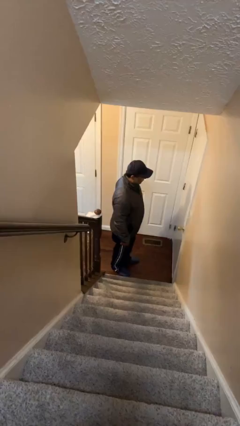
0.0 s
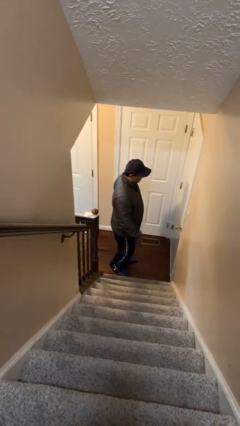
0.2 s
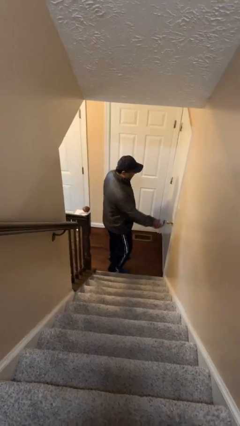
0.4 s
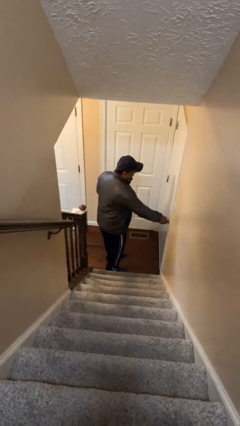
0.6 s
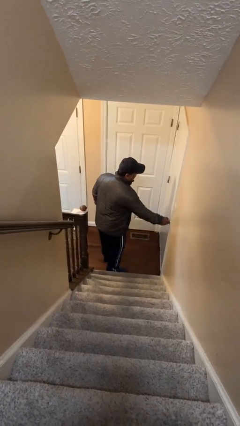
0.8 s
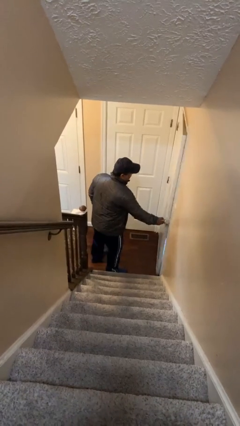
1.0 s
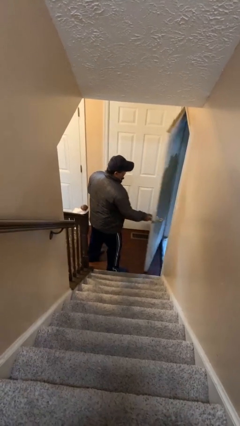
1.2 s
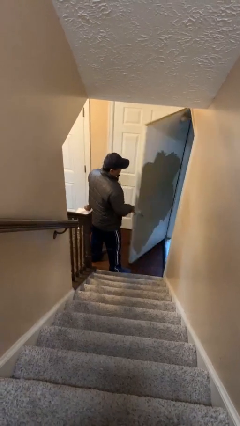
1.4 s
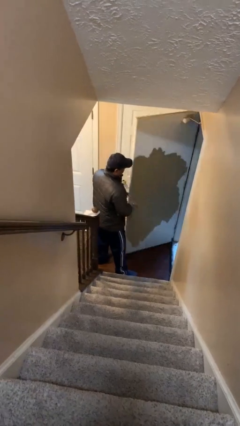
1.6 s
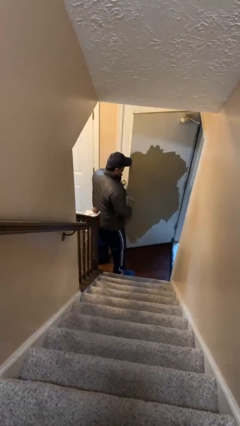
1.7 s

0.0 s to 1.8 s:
person opens facility door

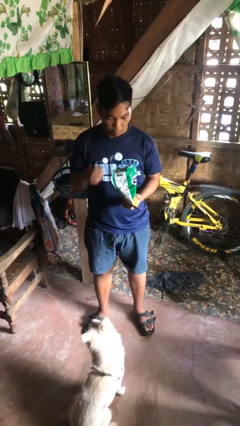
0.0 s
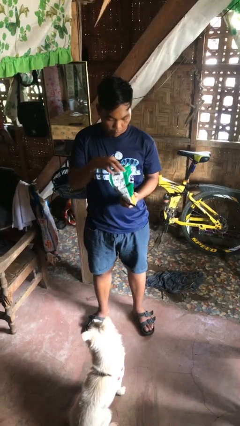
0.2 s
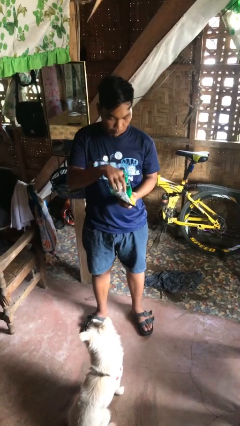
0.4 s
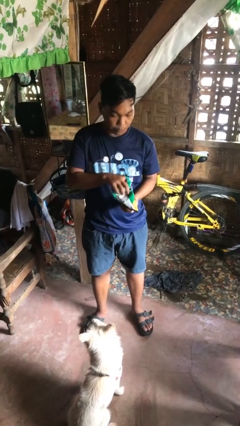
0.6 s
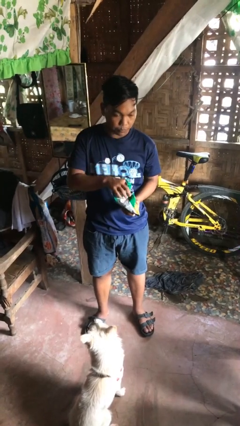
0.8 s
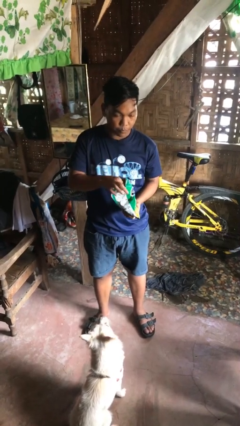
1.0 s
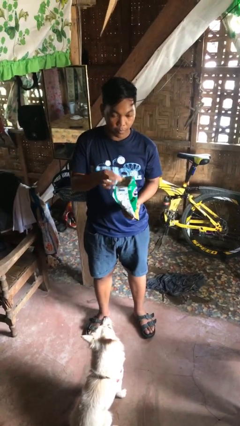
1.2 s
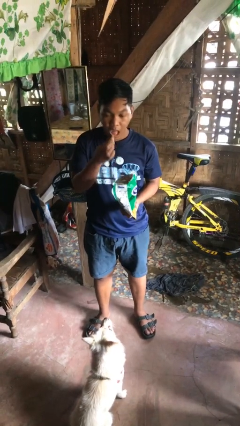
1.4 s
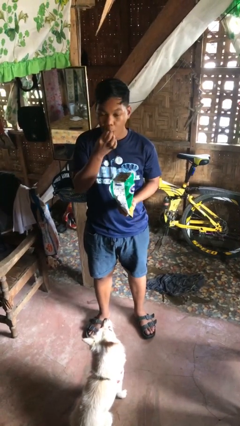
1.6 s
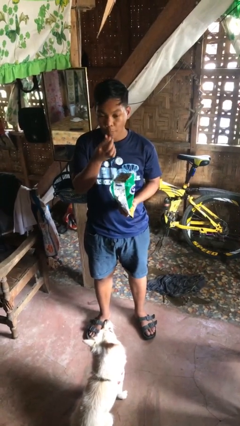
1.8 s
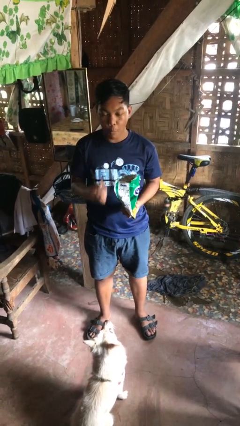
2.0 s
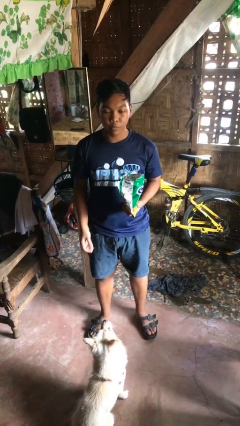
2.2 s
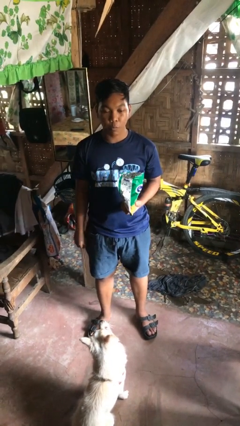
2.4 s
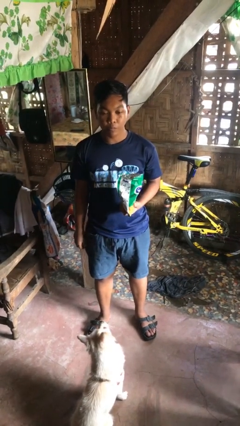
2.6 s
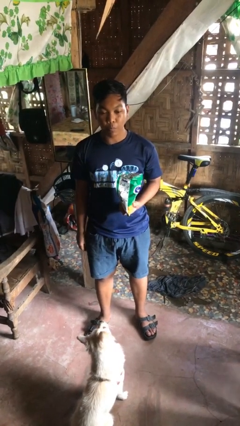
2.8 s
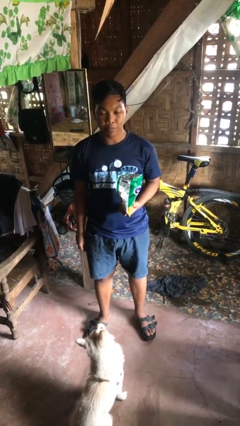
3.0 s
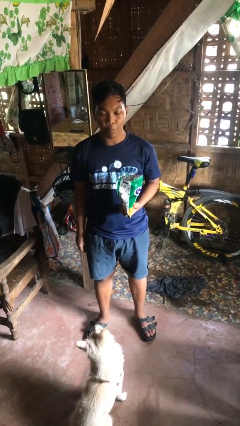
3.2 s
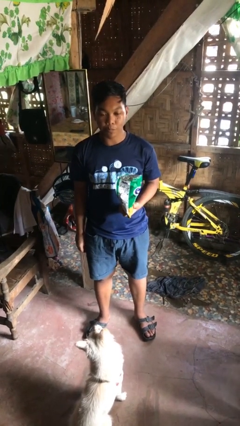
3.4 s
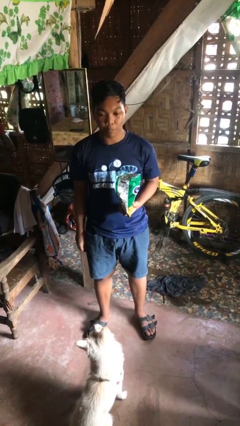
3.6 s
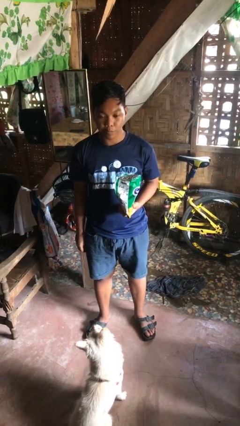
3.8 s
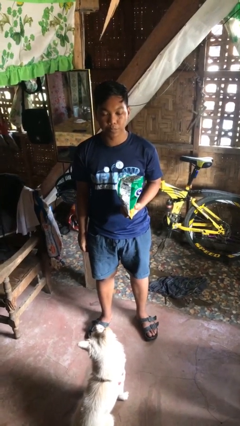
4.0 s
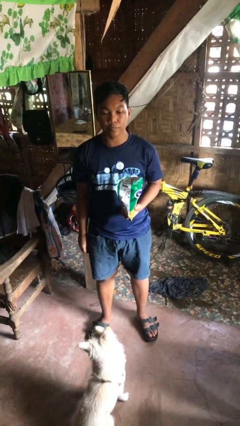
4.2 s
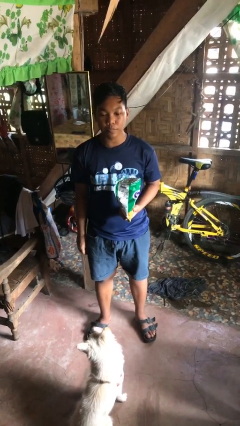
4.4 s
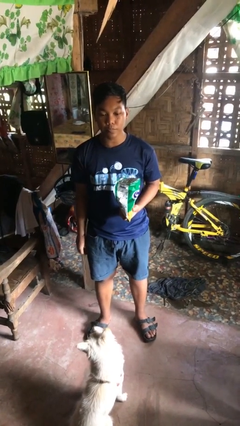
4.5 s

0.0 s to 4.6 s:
person eats snack from bag

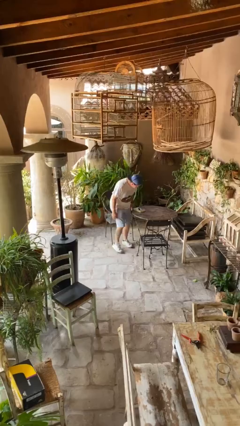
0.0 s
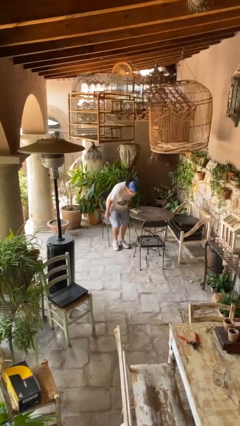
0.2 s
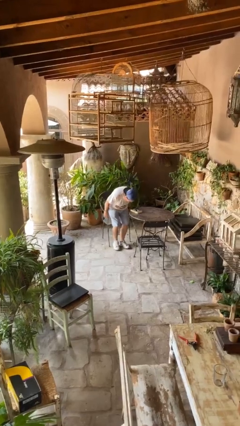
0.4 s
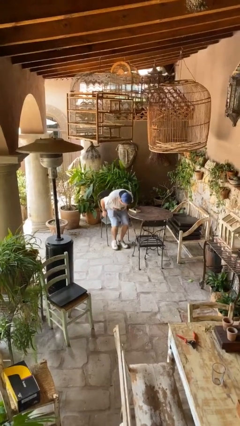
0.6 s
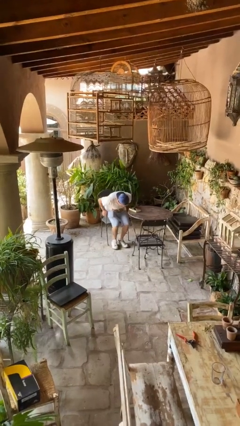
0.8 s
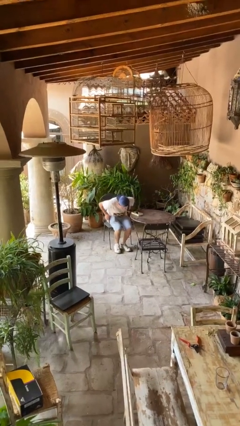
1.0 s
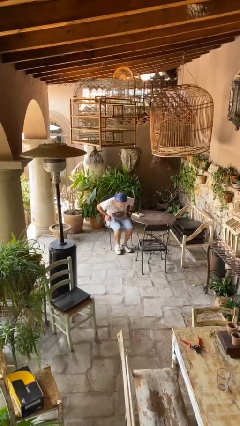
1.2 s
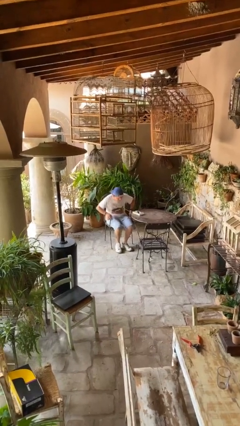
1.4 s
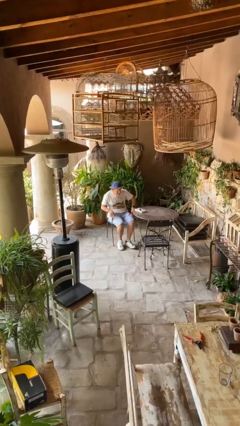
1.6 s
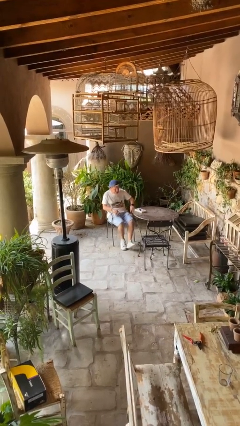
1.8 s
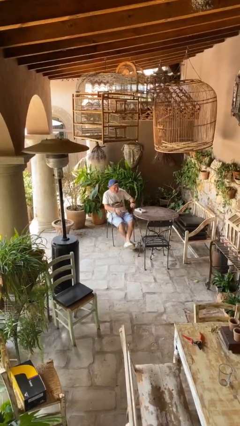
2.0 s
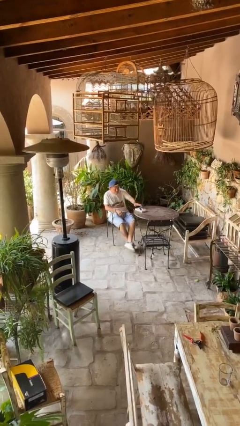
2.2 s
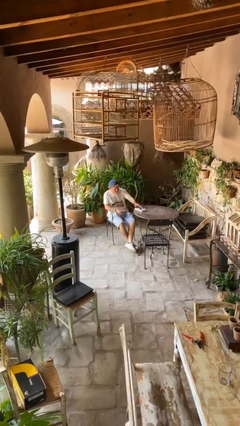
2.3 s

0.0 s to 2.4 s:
person sits down

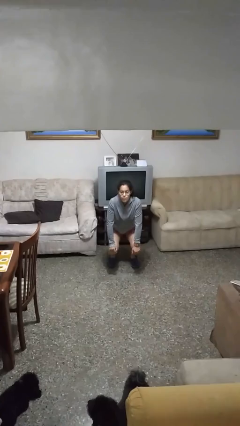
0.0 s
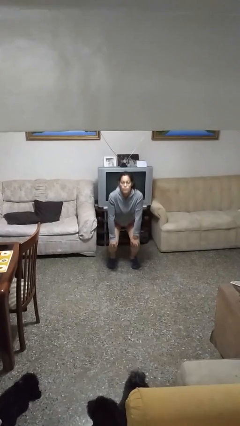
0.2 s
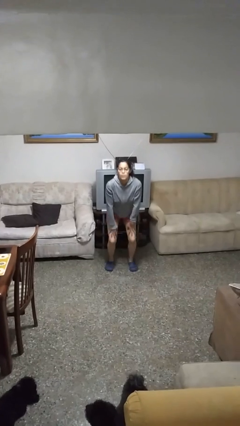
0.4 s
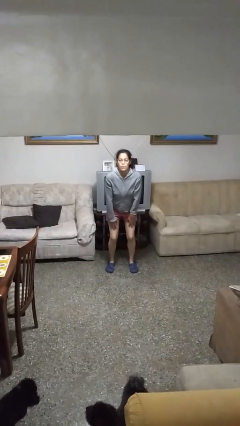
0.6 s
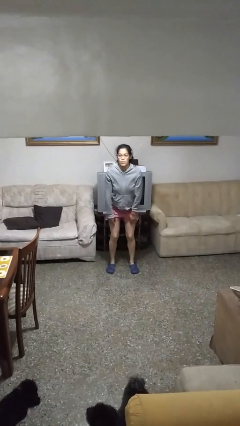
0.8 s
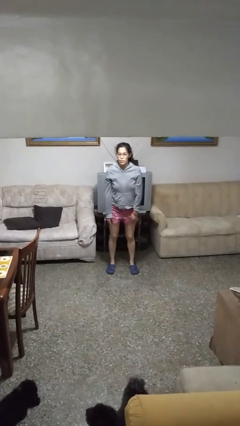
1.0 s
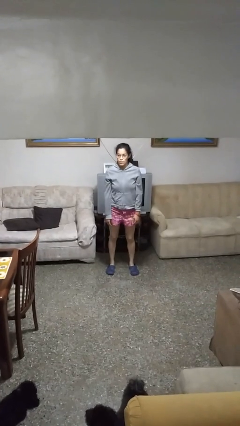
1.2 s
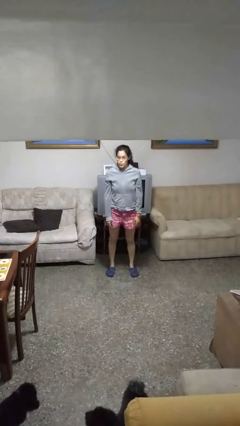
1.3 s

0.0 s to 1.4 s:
person stands up

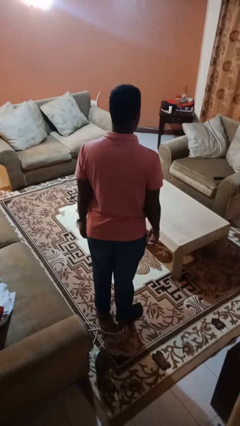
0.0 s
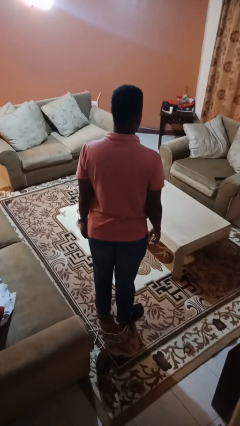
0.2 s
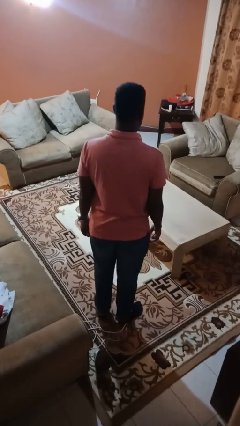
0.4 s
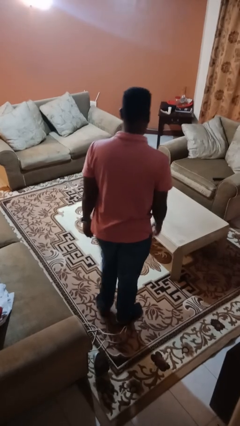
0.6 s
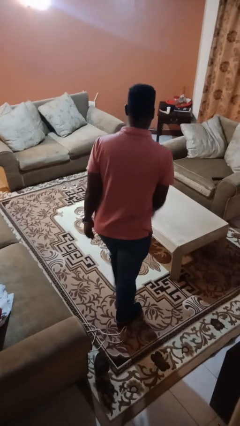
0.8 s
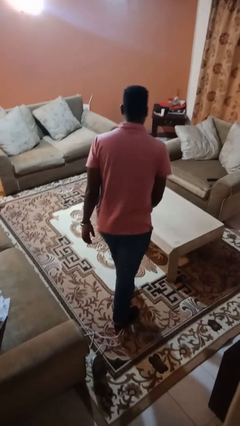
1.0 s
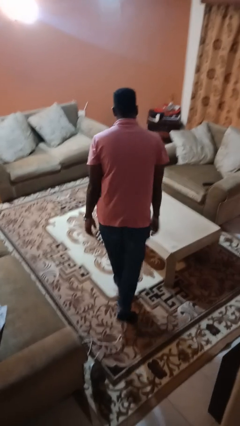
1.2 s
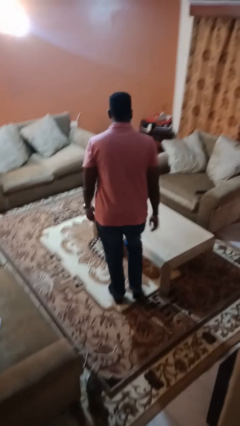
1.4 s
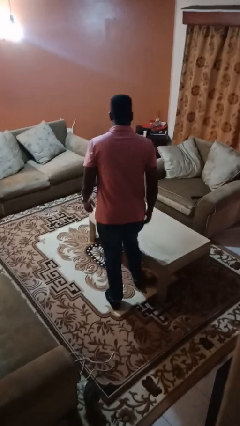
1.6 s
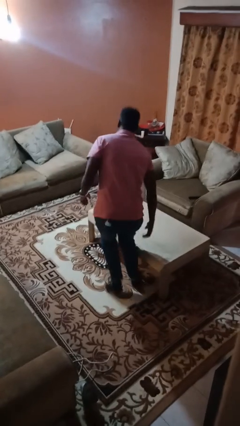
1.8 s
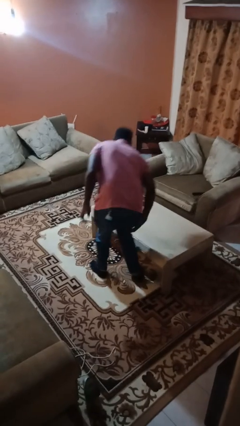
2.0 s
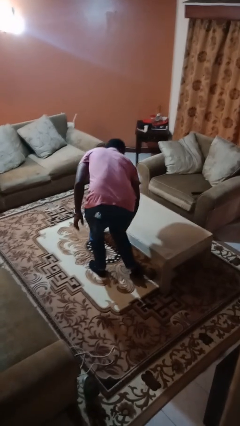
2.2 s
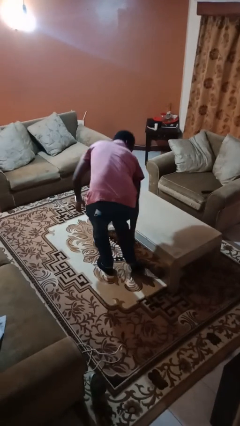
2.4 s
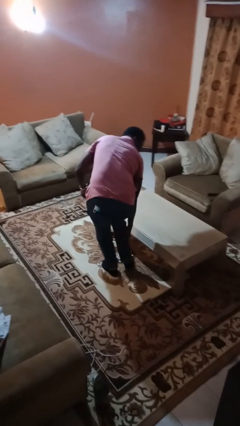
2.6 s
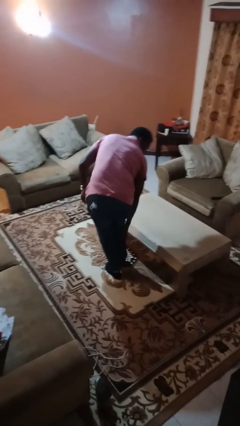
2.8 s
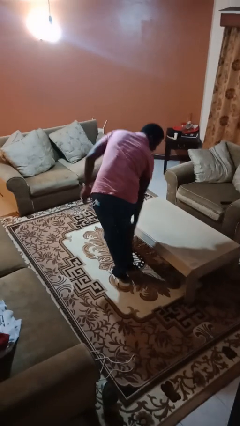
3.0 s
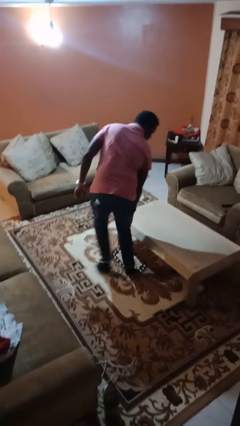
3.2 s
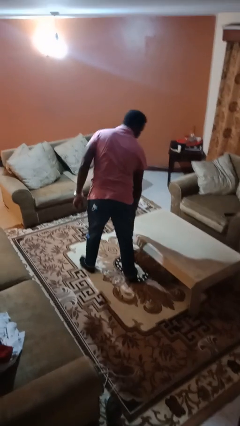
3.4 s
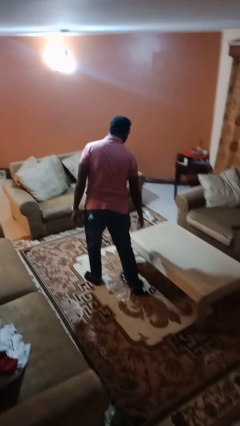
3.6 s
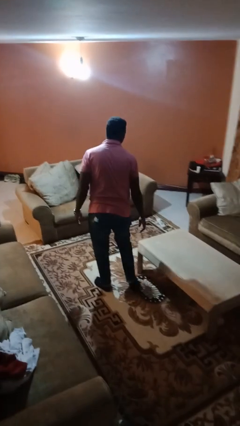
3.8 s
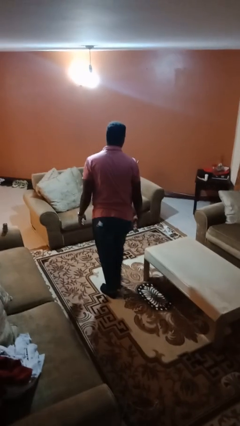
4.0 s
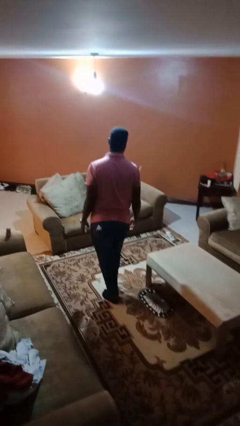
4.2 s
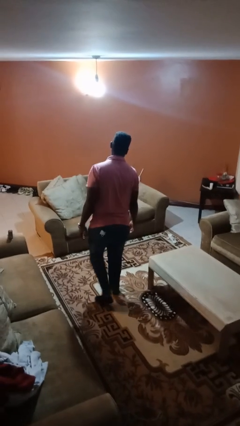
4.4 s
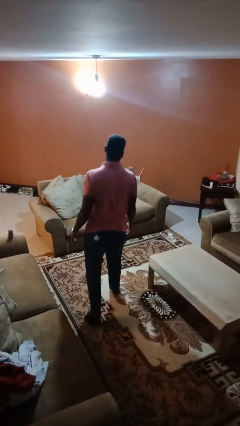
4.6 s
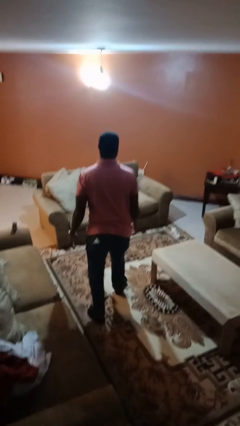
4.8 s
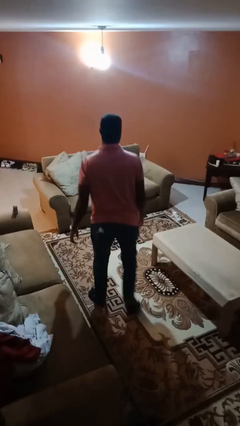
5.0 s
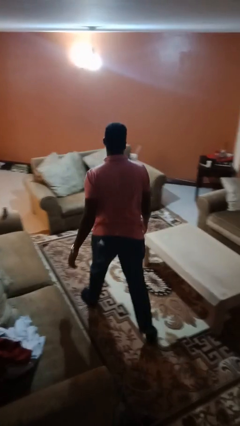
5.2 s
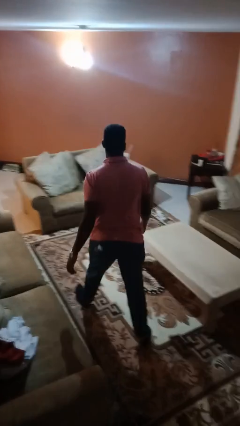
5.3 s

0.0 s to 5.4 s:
person bumps into table

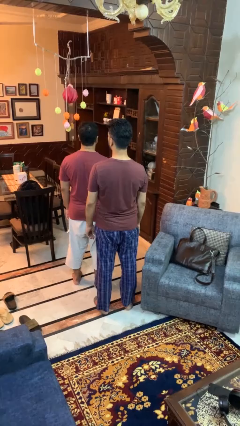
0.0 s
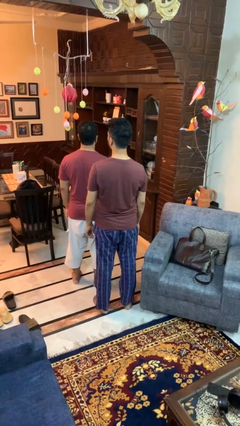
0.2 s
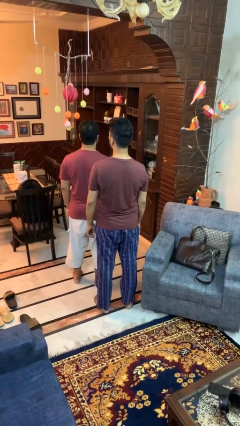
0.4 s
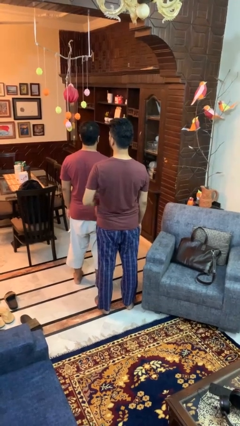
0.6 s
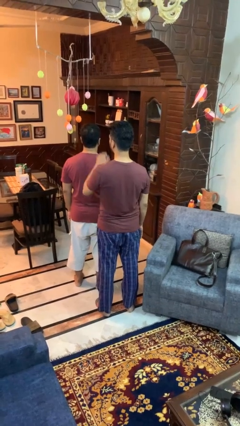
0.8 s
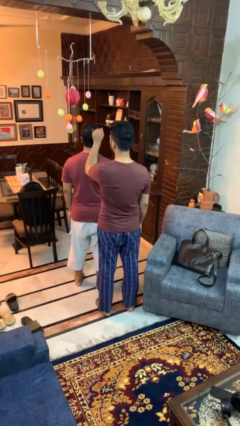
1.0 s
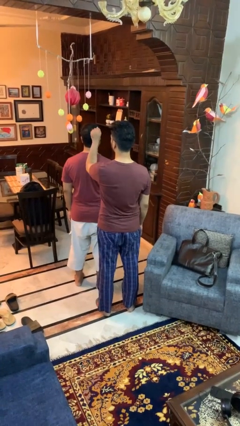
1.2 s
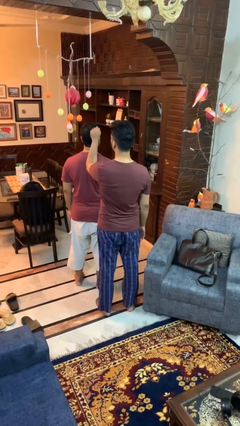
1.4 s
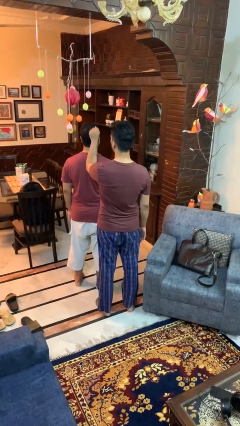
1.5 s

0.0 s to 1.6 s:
person grabs person by hair

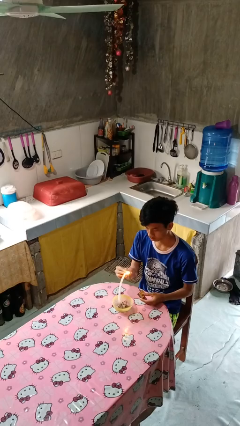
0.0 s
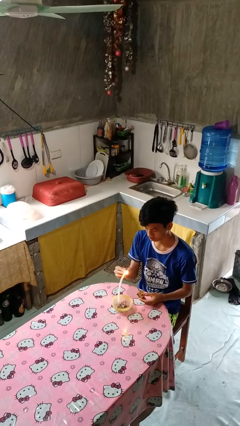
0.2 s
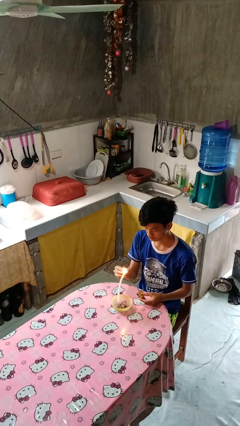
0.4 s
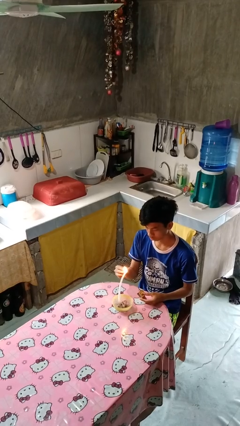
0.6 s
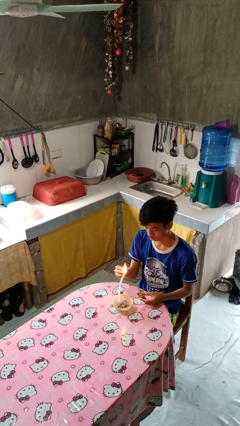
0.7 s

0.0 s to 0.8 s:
person lights candle
